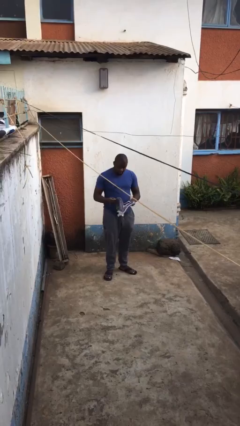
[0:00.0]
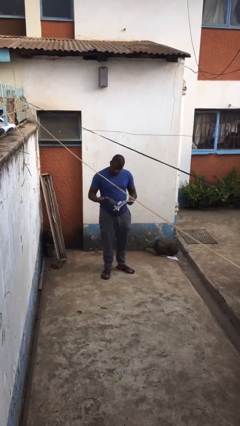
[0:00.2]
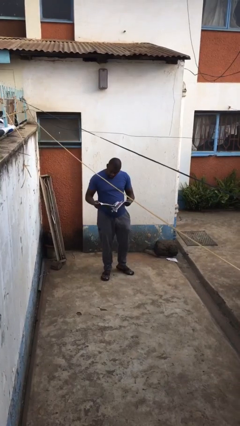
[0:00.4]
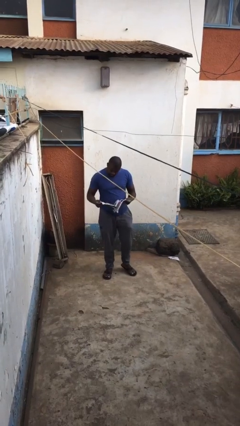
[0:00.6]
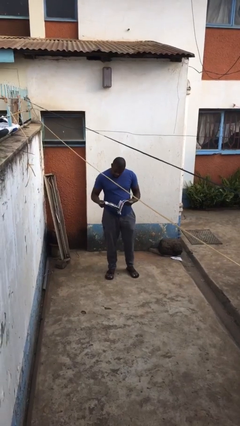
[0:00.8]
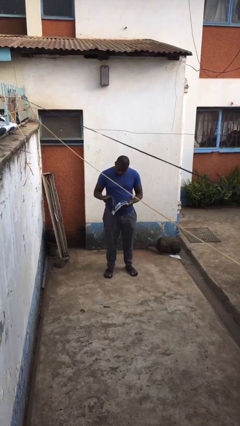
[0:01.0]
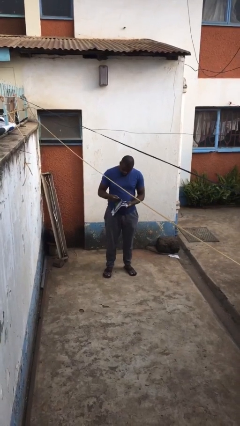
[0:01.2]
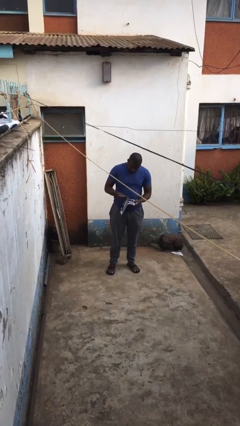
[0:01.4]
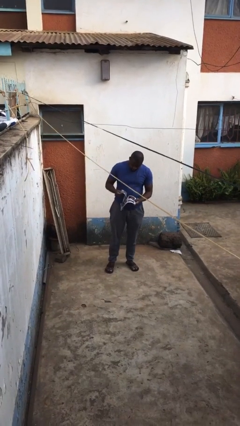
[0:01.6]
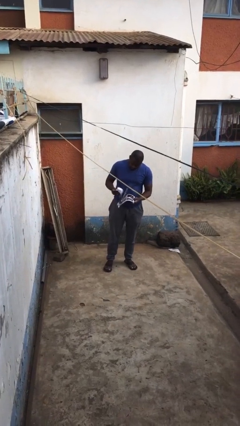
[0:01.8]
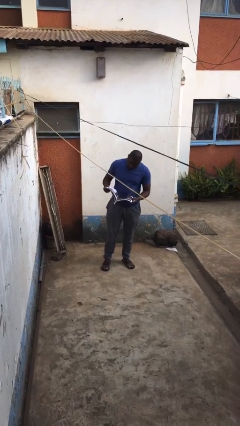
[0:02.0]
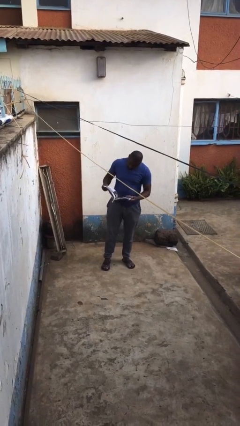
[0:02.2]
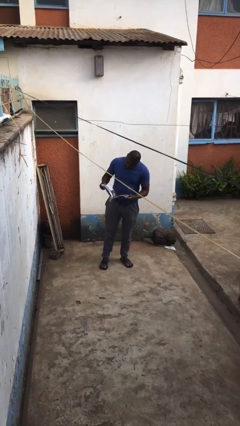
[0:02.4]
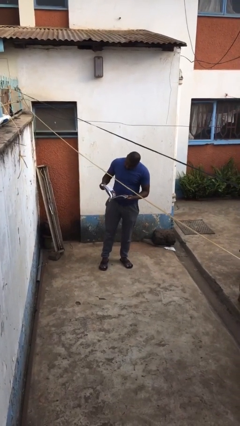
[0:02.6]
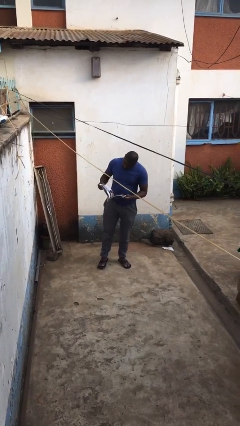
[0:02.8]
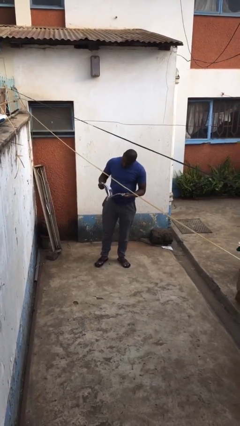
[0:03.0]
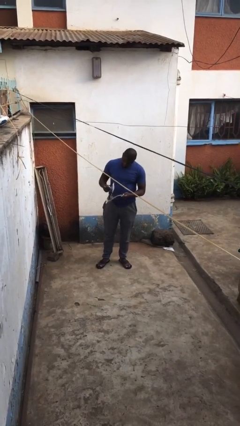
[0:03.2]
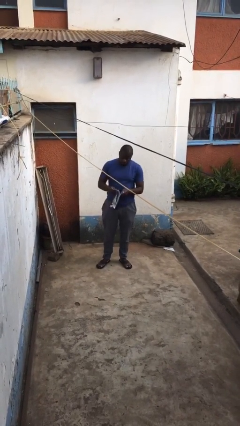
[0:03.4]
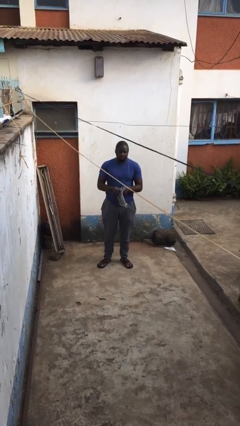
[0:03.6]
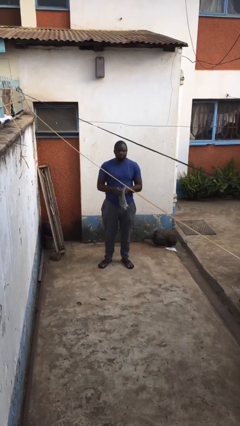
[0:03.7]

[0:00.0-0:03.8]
person reads magazine

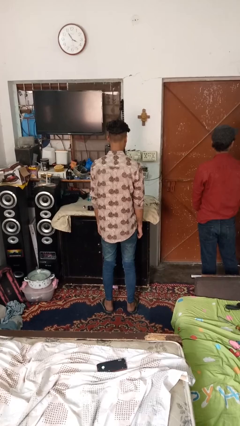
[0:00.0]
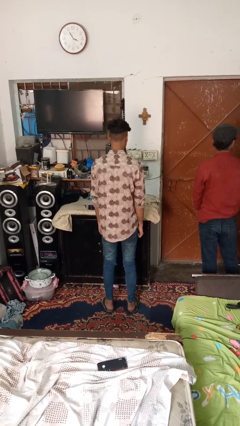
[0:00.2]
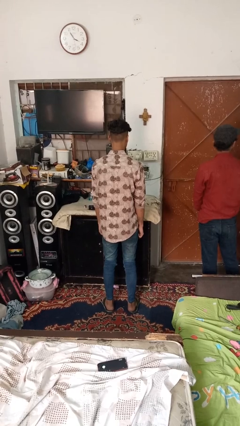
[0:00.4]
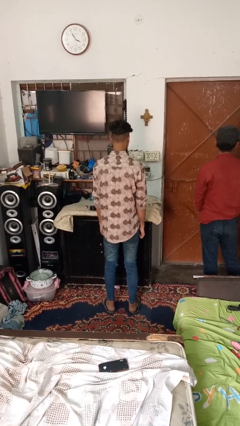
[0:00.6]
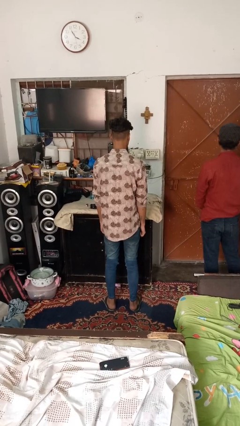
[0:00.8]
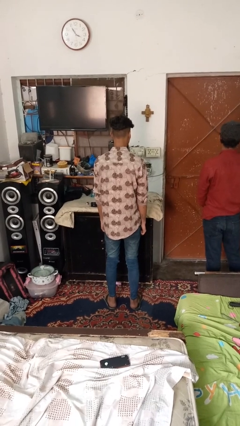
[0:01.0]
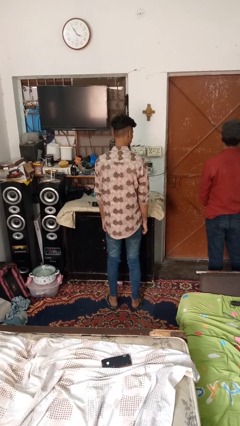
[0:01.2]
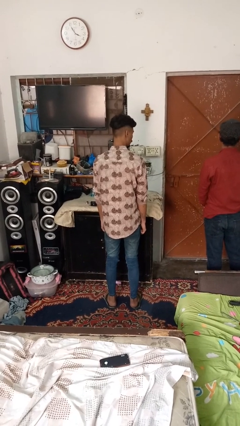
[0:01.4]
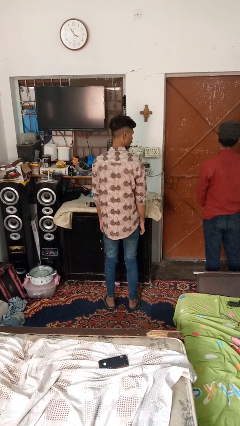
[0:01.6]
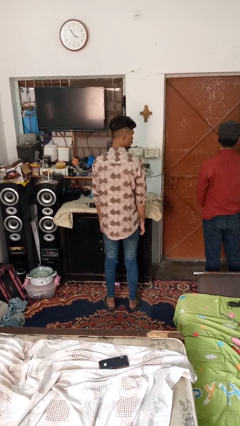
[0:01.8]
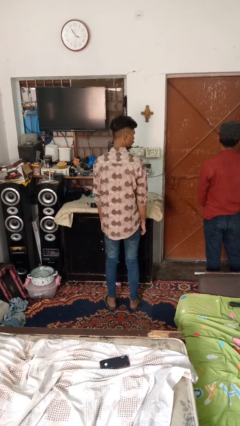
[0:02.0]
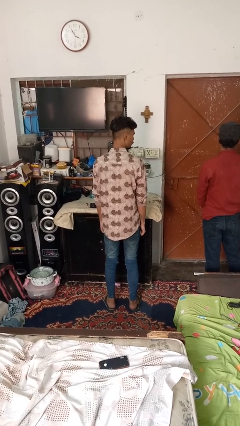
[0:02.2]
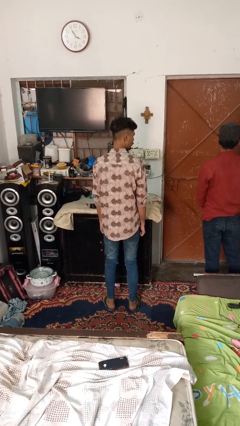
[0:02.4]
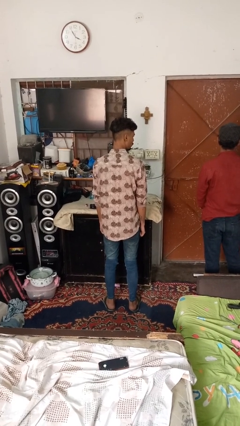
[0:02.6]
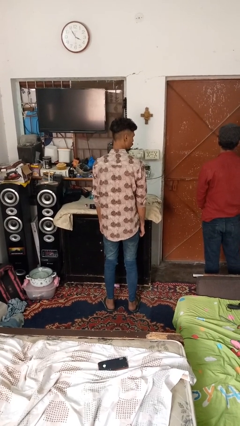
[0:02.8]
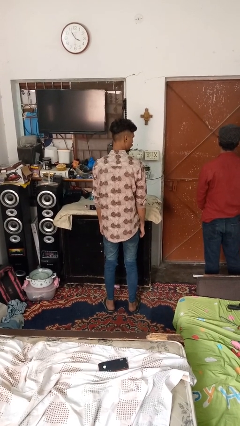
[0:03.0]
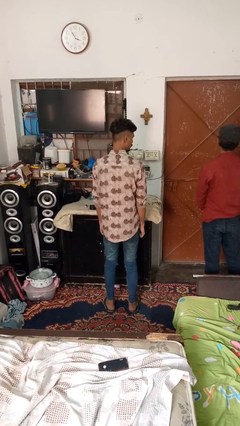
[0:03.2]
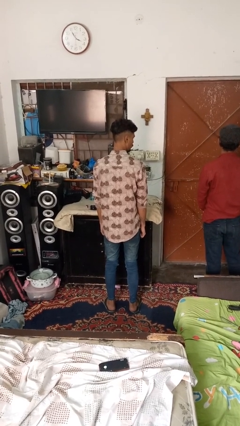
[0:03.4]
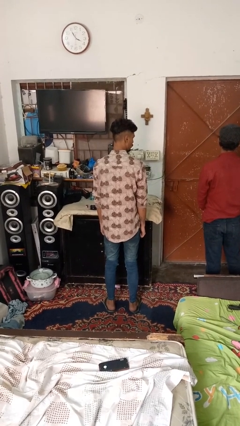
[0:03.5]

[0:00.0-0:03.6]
person looks over shoulder

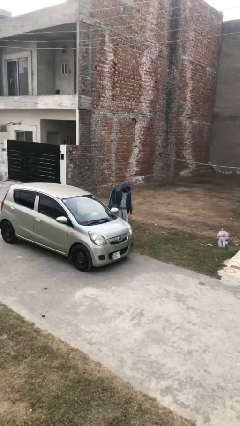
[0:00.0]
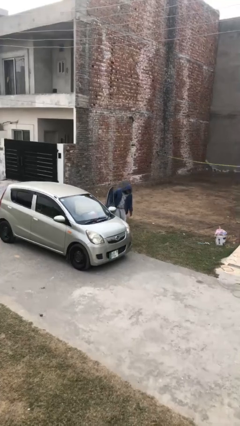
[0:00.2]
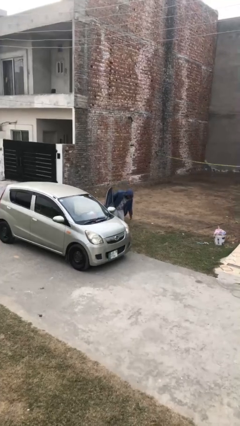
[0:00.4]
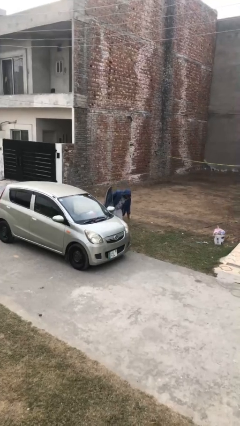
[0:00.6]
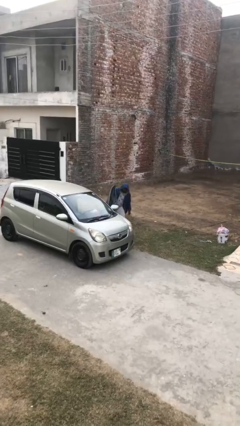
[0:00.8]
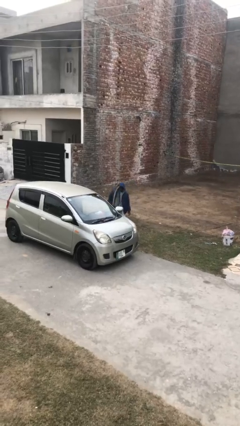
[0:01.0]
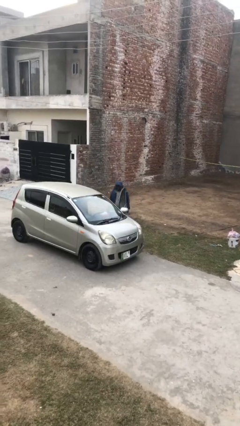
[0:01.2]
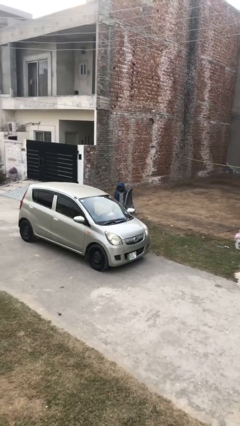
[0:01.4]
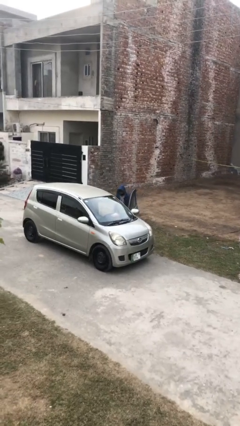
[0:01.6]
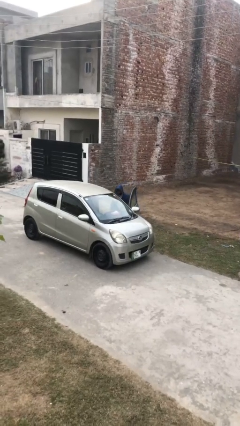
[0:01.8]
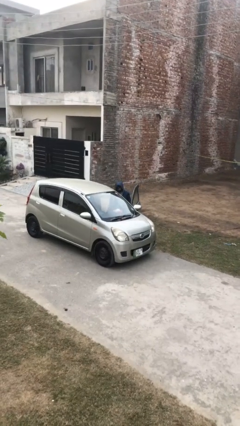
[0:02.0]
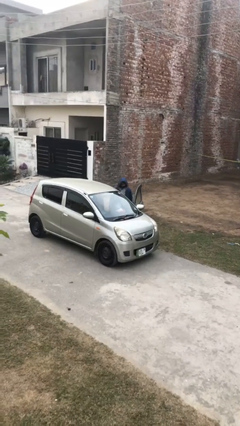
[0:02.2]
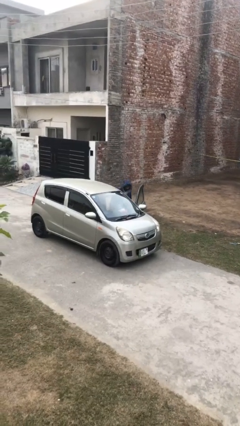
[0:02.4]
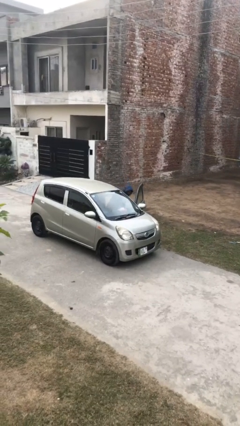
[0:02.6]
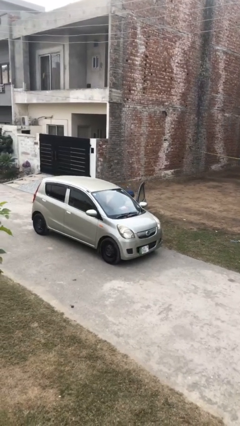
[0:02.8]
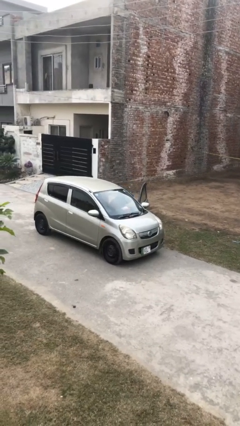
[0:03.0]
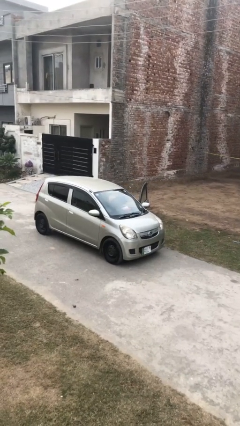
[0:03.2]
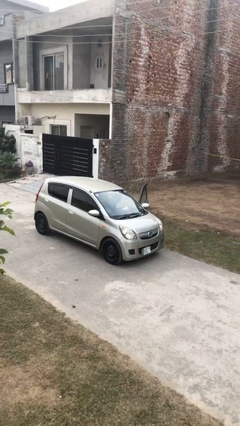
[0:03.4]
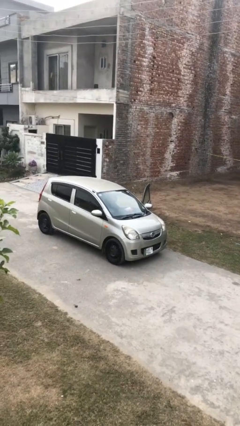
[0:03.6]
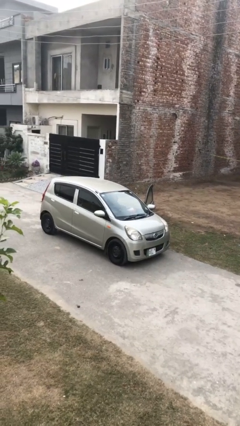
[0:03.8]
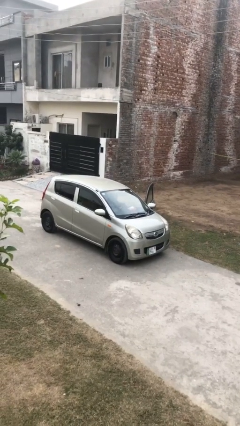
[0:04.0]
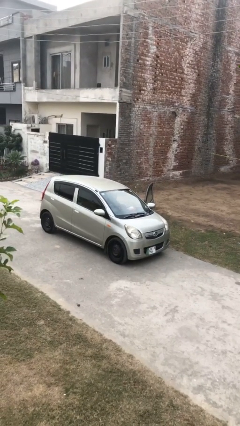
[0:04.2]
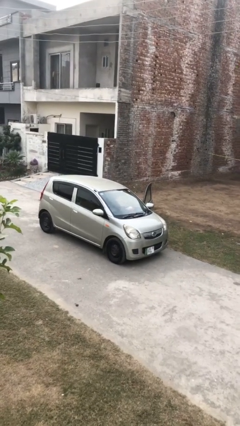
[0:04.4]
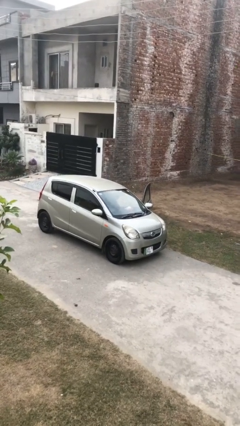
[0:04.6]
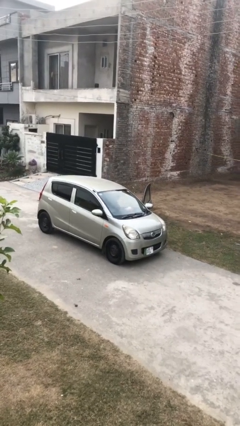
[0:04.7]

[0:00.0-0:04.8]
person enters car

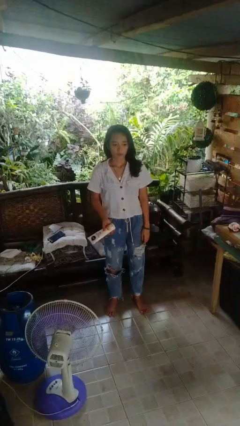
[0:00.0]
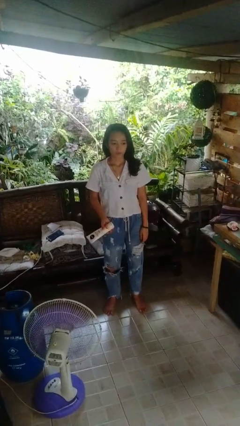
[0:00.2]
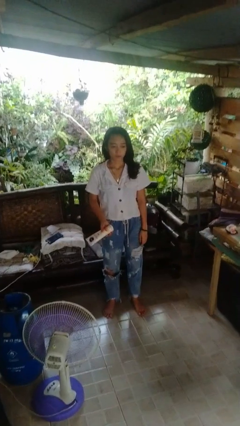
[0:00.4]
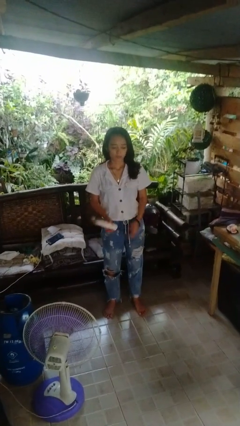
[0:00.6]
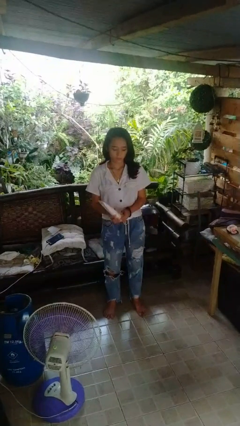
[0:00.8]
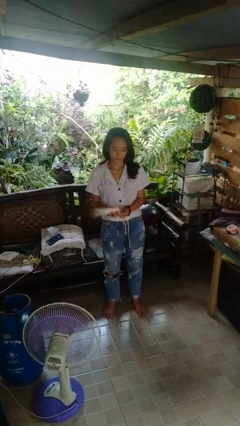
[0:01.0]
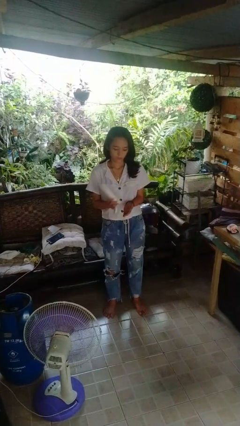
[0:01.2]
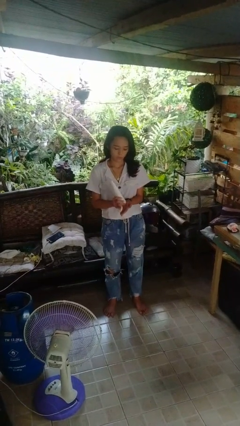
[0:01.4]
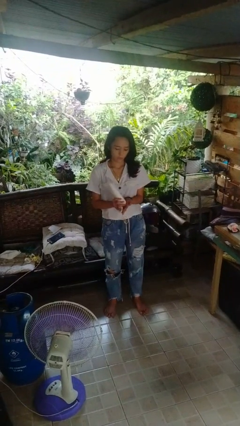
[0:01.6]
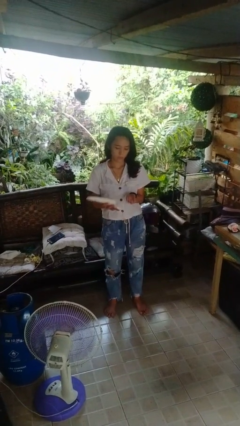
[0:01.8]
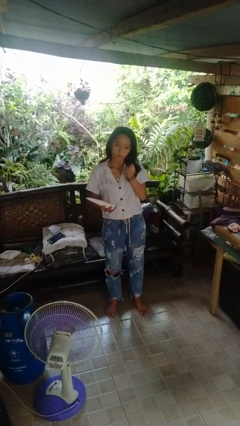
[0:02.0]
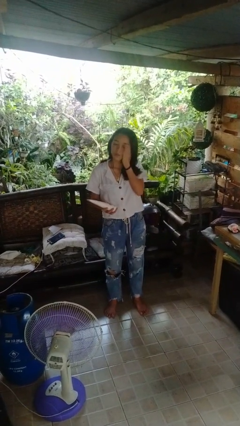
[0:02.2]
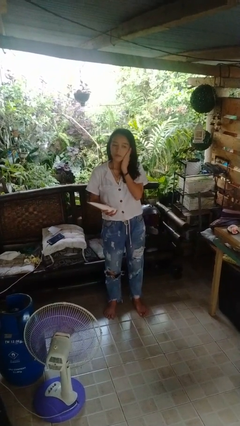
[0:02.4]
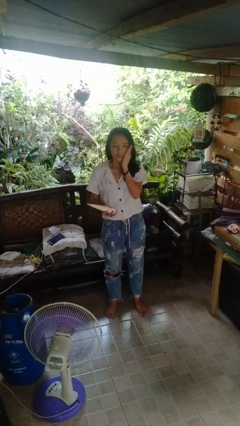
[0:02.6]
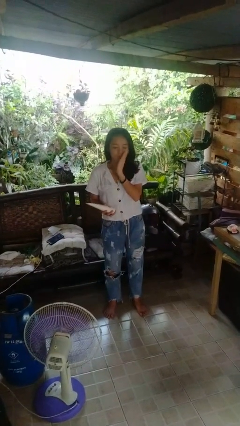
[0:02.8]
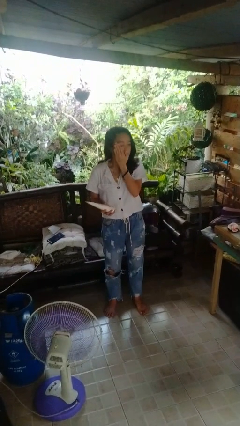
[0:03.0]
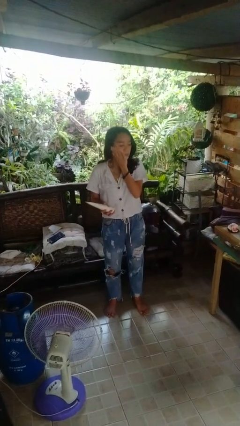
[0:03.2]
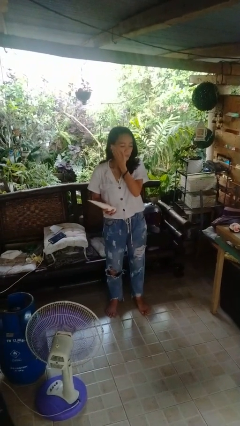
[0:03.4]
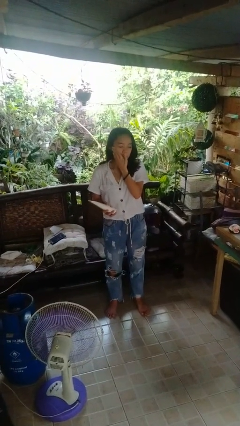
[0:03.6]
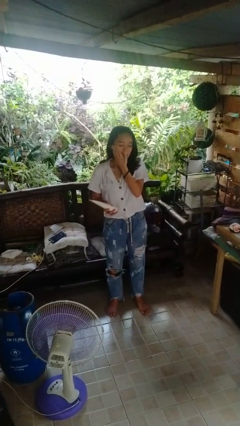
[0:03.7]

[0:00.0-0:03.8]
person applies sunscreen

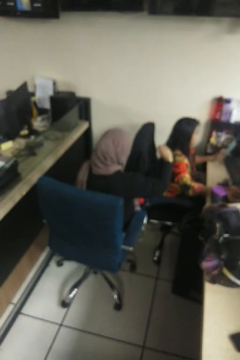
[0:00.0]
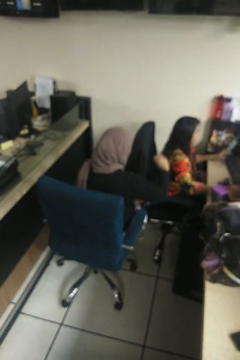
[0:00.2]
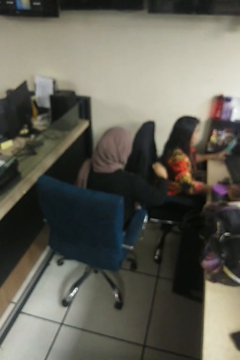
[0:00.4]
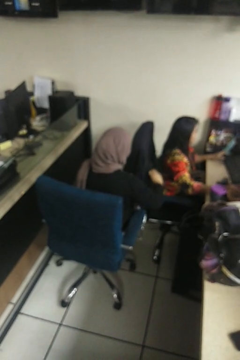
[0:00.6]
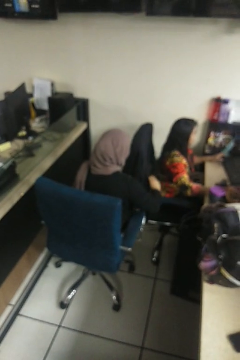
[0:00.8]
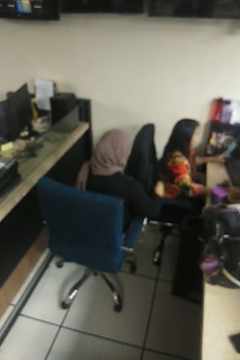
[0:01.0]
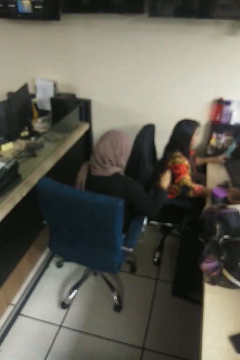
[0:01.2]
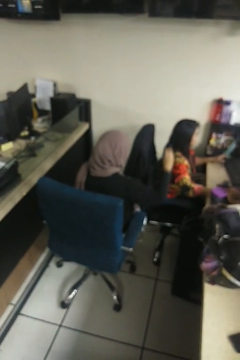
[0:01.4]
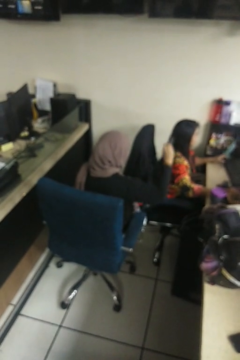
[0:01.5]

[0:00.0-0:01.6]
person brushes hair of person

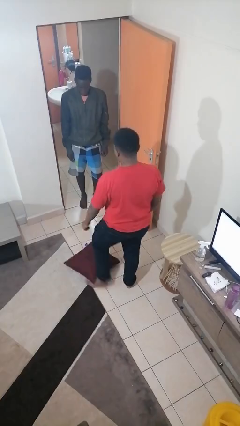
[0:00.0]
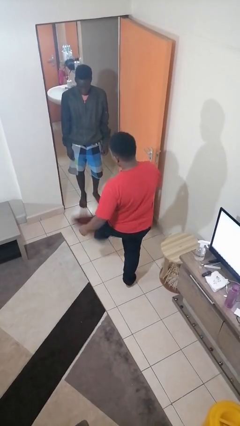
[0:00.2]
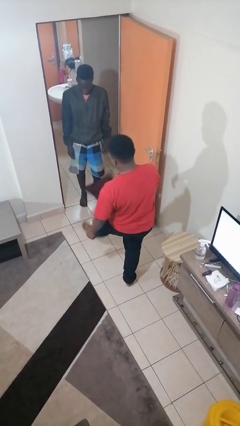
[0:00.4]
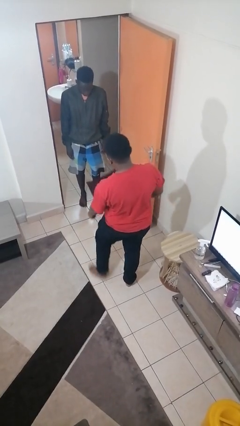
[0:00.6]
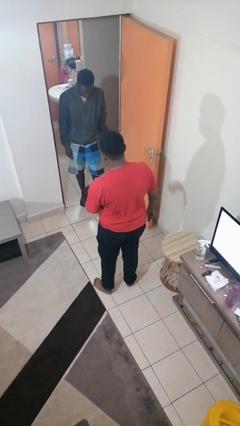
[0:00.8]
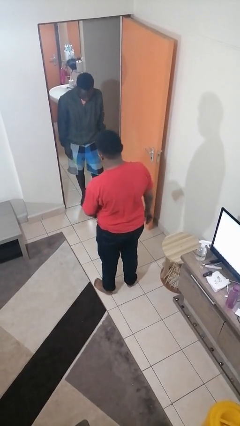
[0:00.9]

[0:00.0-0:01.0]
person kicks object to person
